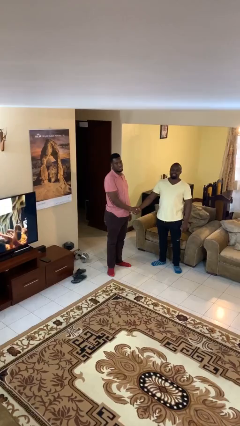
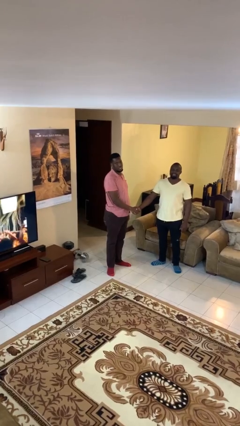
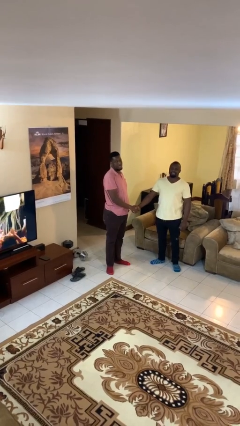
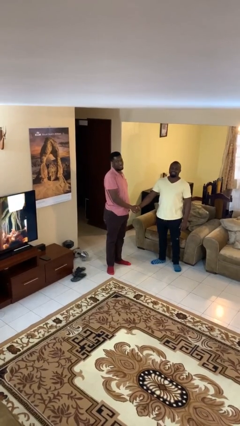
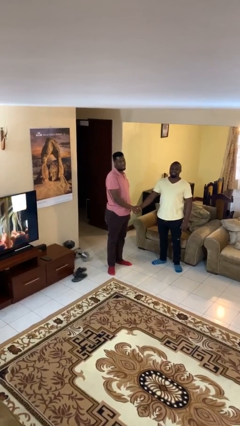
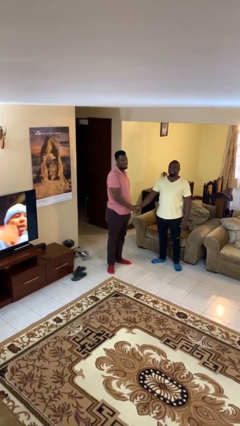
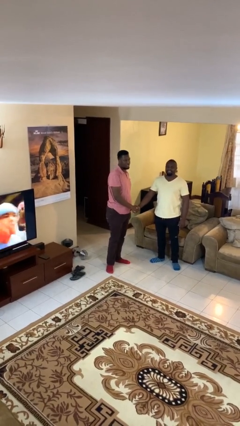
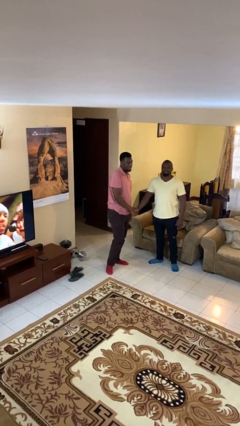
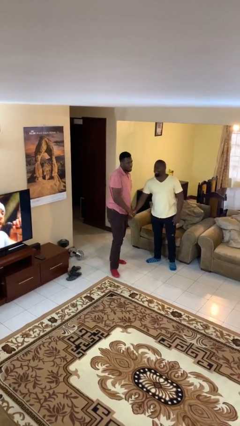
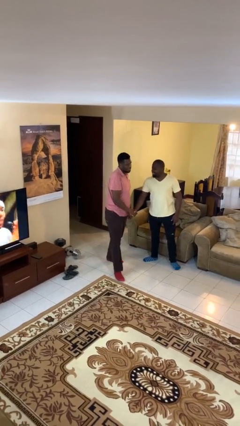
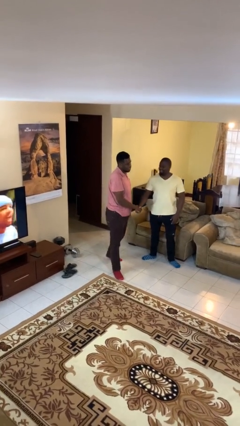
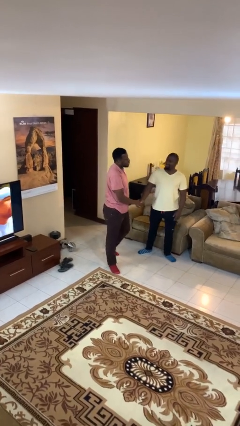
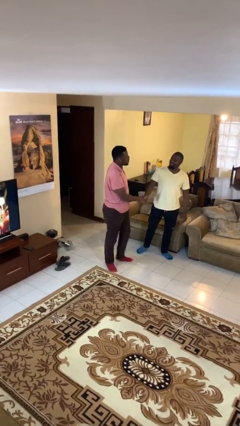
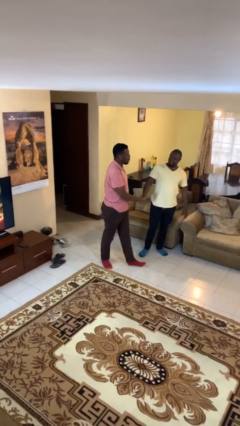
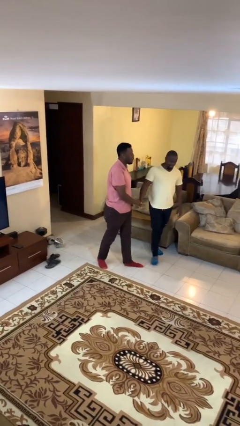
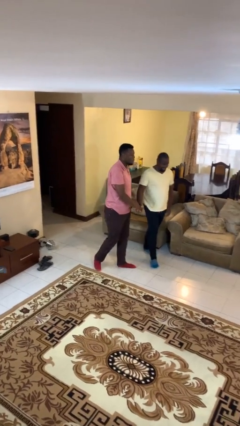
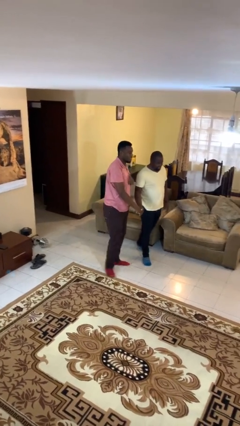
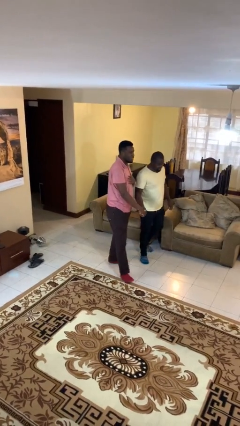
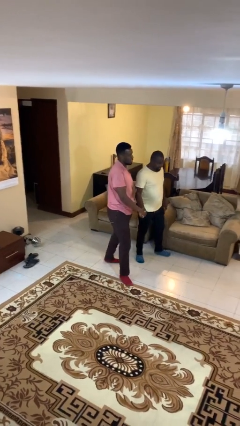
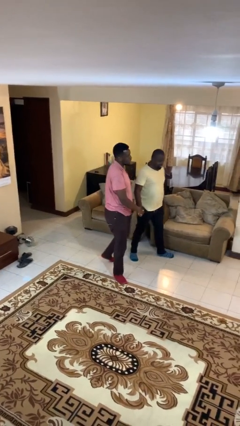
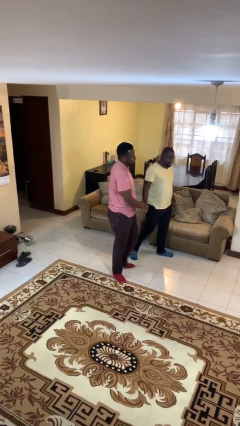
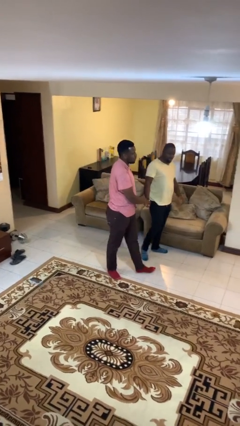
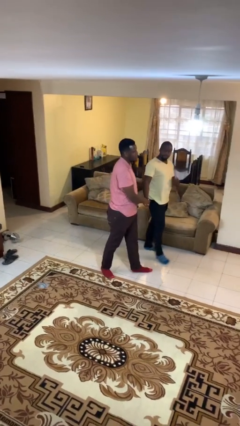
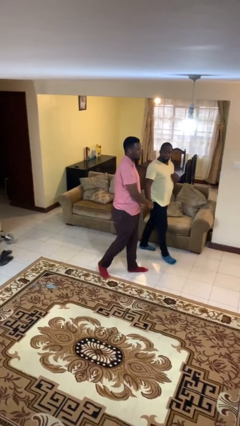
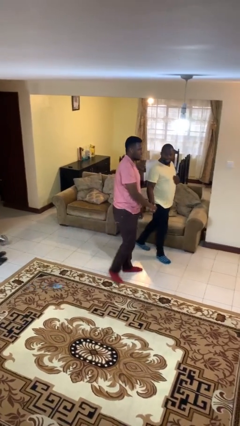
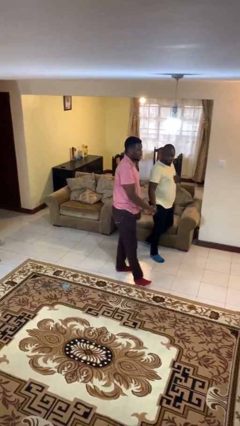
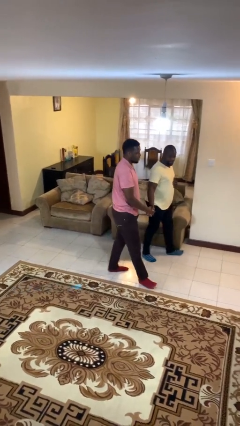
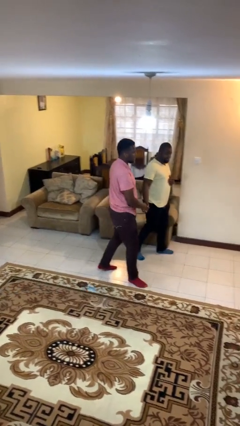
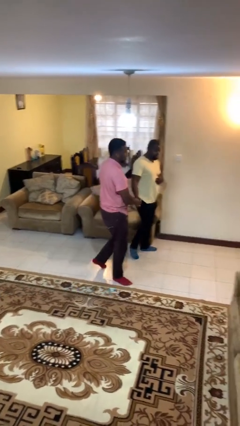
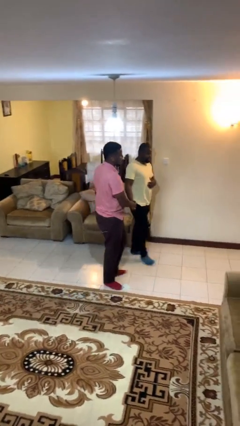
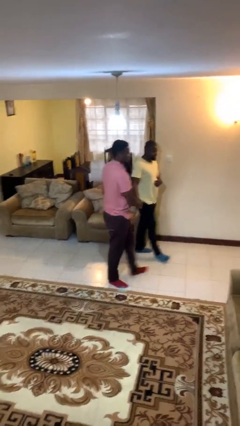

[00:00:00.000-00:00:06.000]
person holds hand

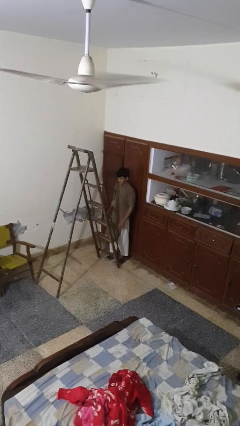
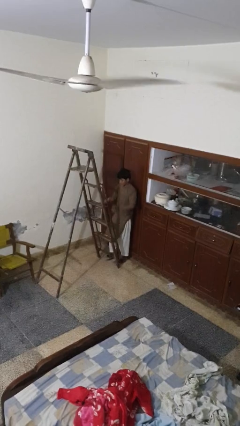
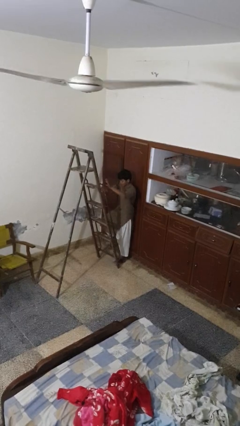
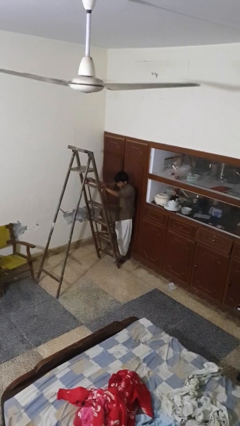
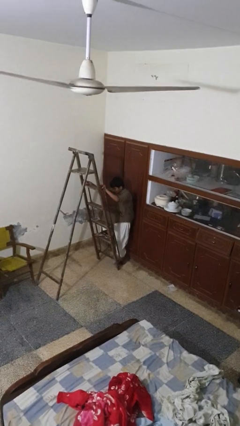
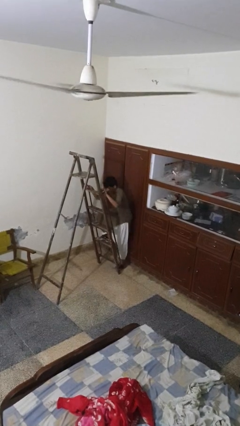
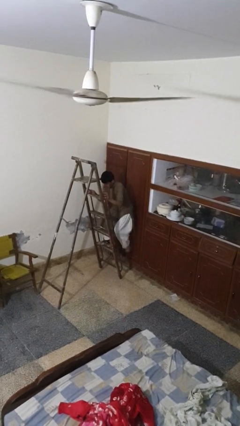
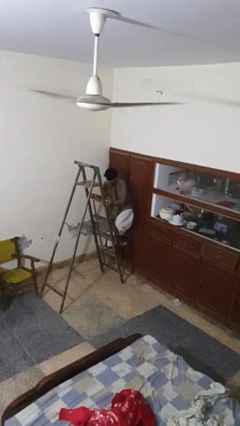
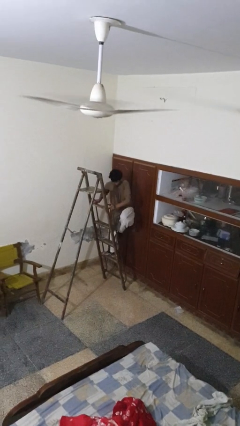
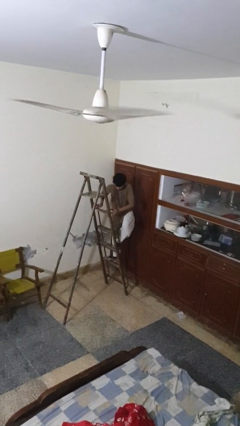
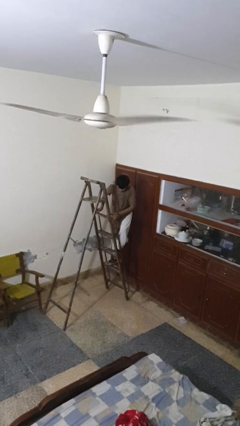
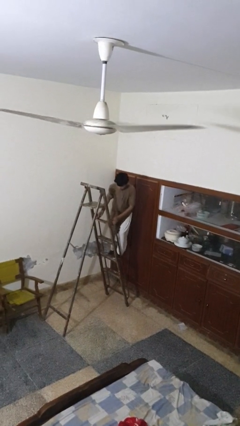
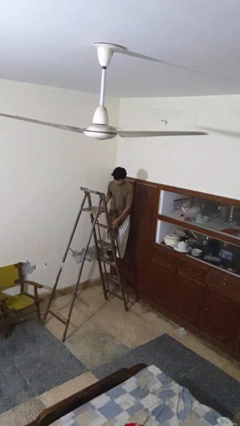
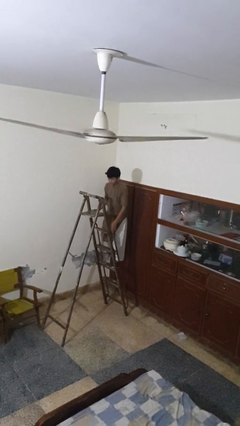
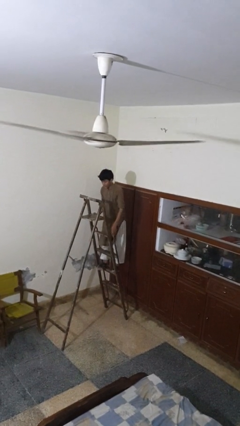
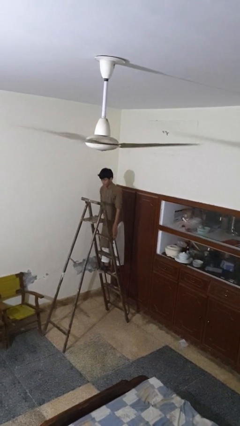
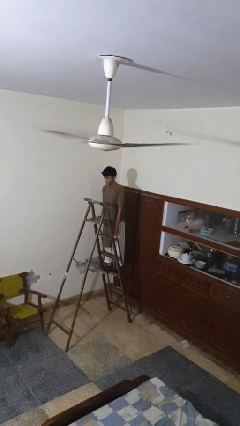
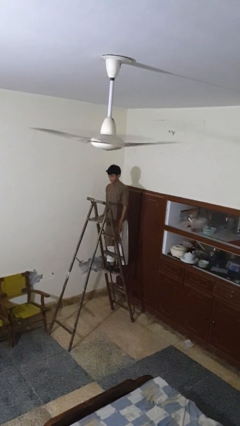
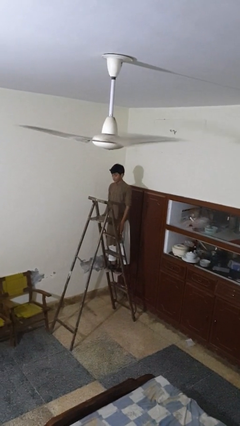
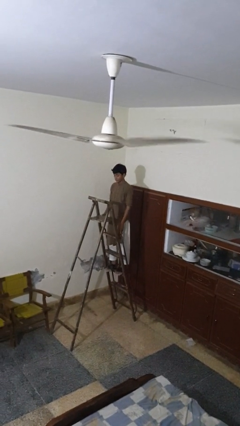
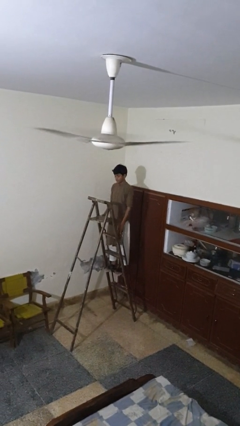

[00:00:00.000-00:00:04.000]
person climbs up ladder

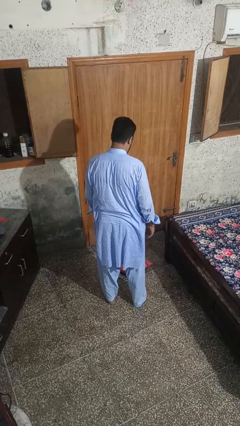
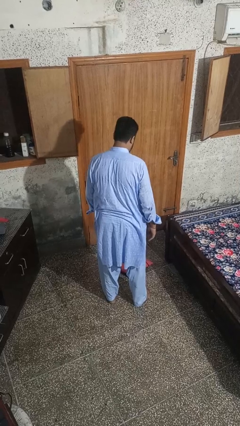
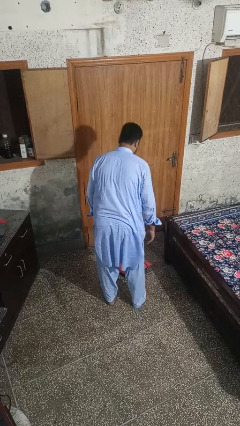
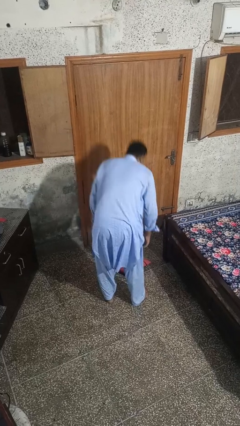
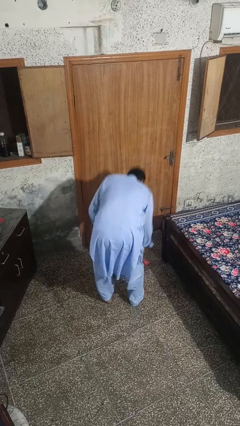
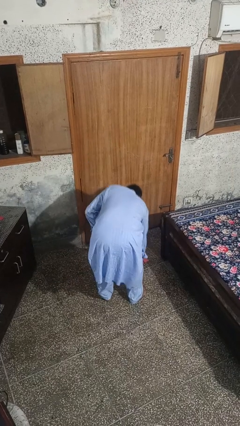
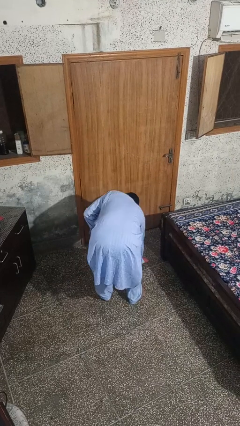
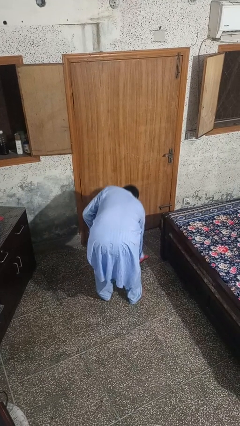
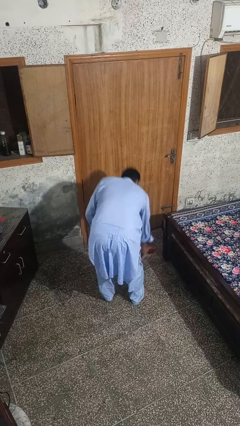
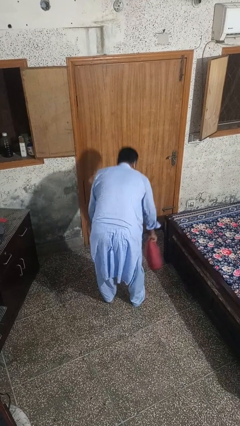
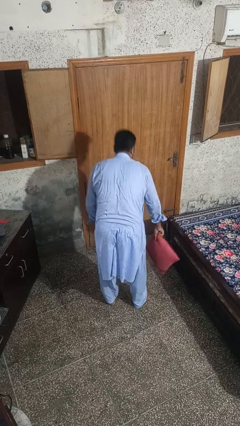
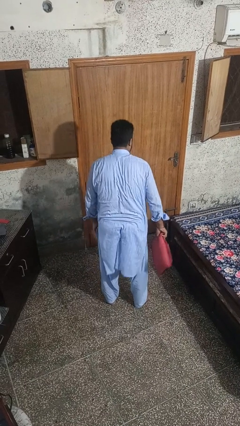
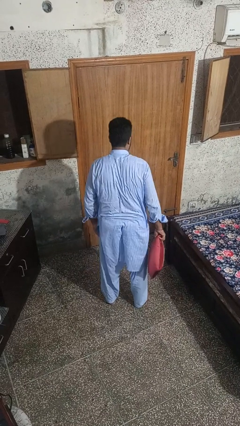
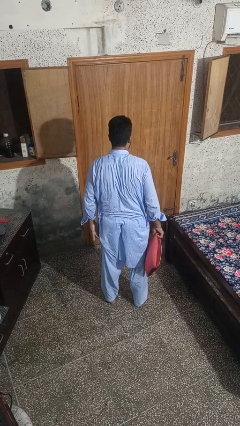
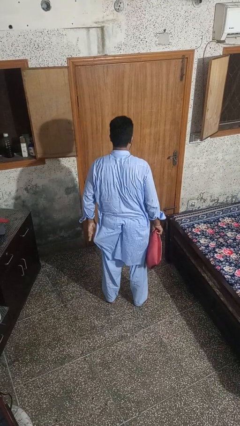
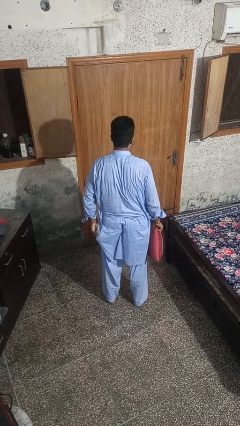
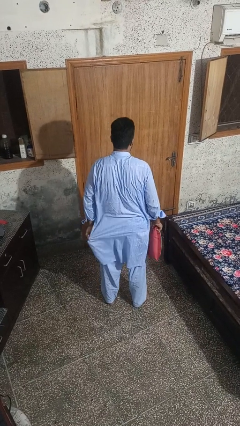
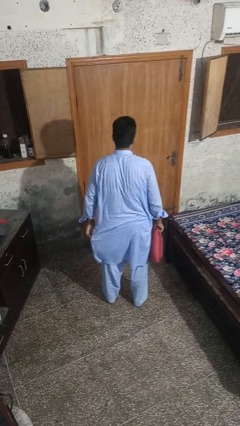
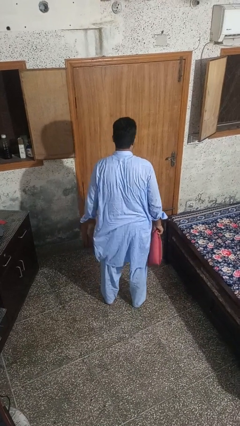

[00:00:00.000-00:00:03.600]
person picks up object from floor

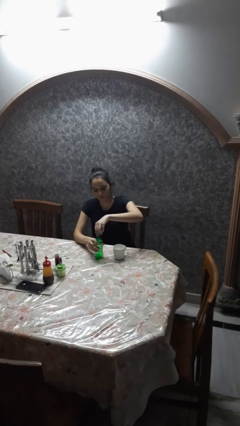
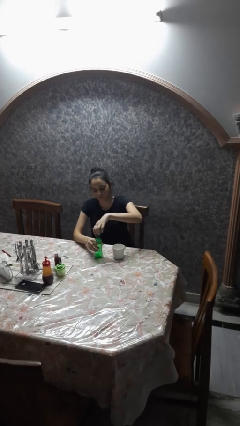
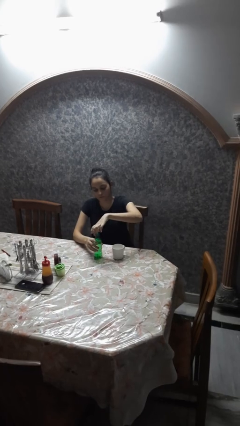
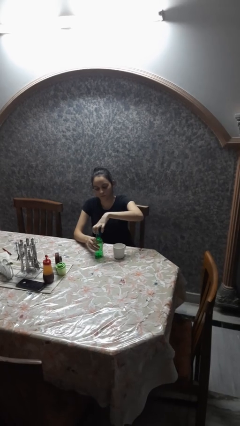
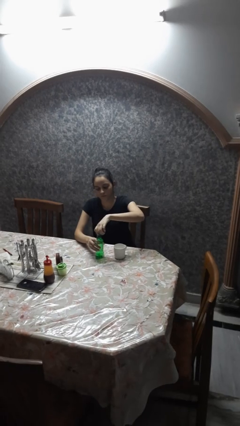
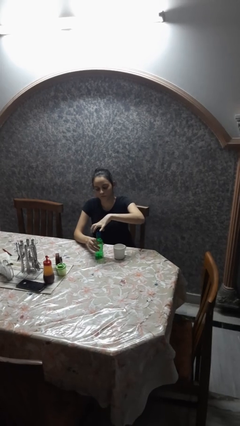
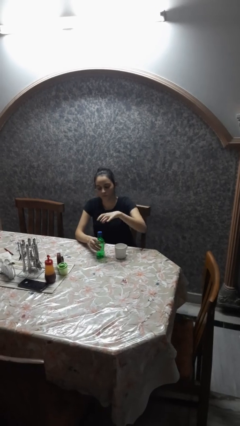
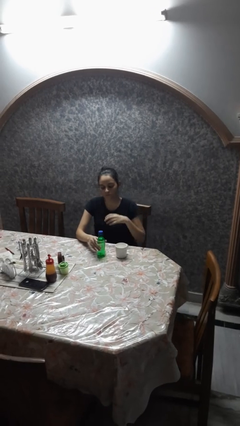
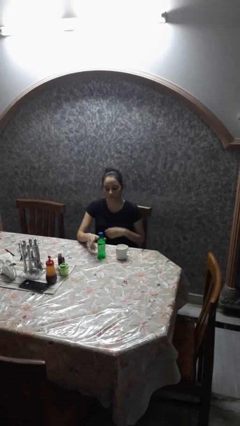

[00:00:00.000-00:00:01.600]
person screws lid to bottle

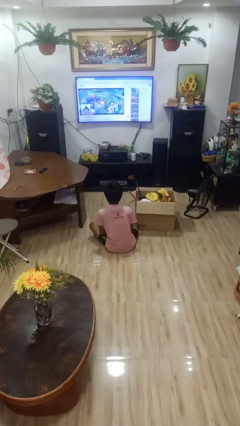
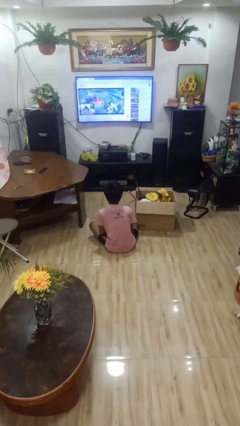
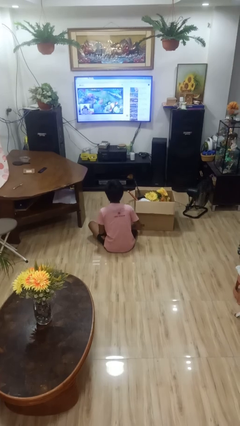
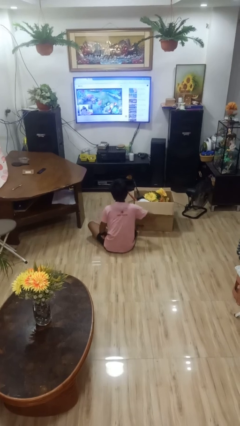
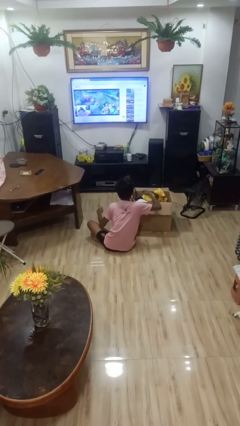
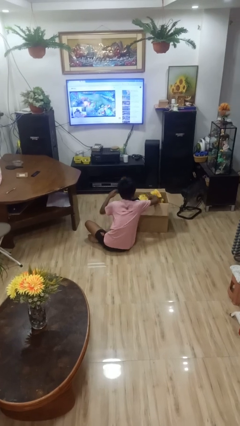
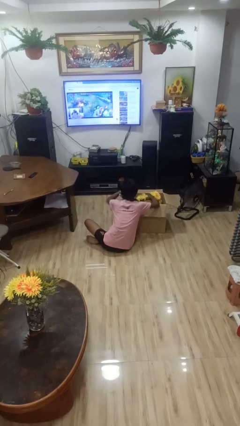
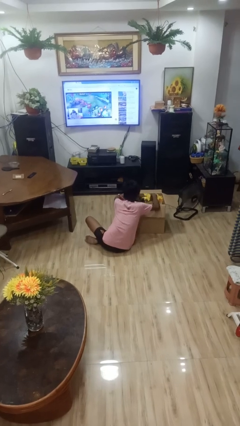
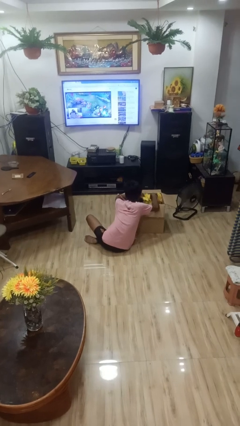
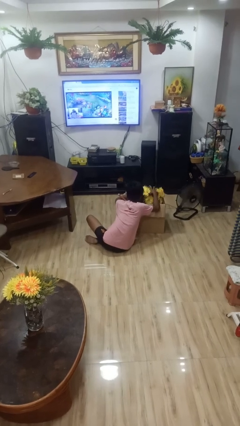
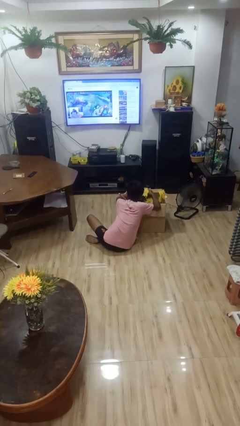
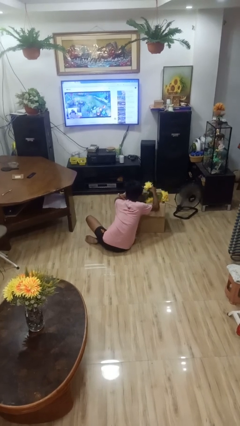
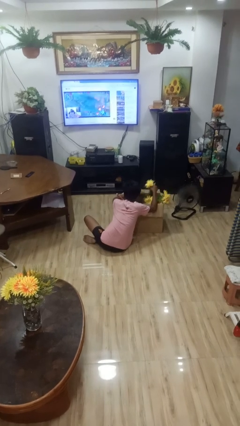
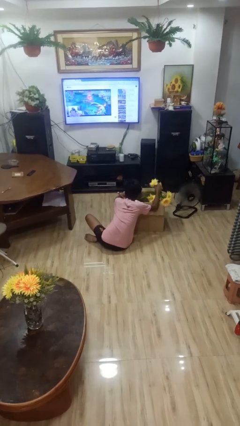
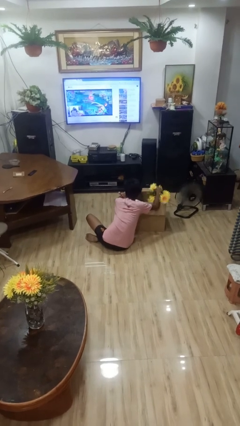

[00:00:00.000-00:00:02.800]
person searches in box
